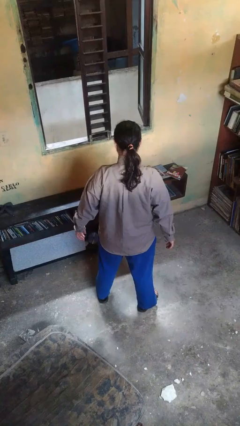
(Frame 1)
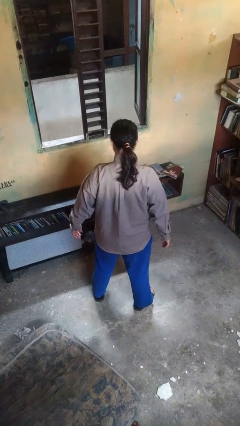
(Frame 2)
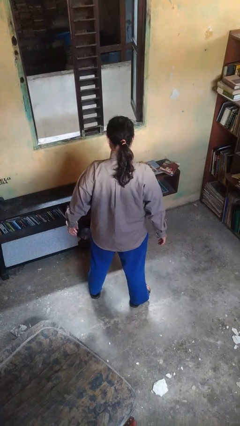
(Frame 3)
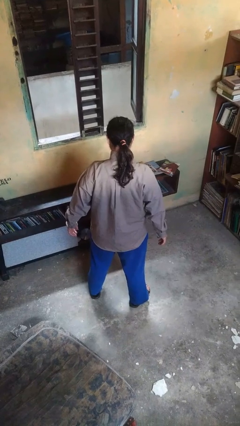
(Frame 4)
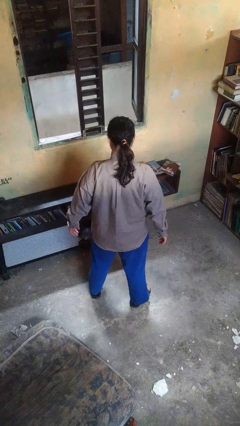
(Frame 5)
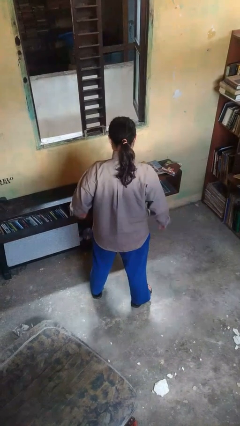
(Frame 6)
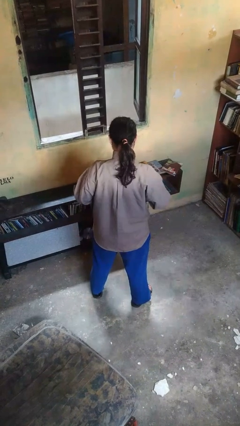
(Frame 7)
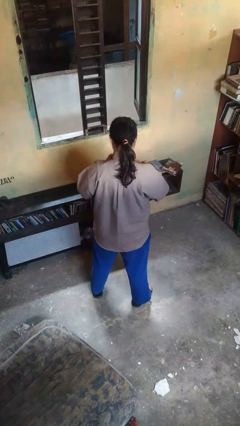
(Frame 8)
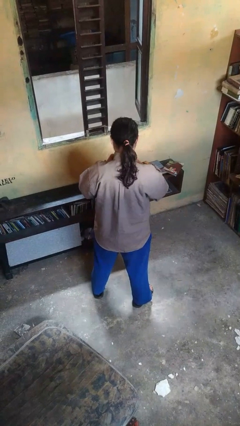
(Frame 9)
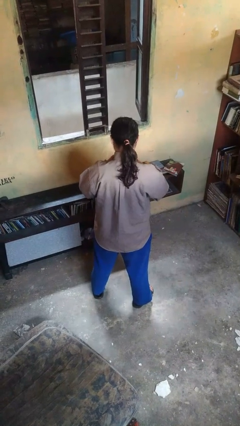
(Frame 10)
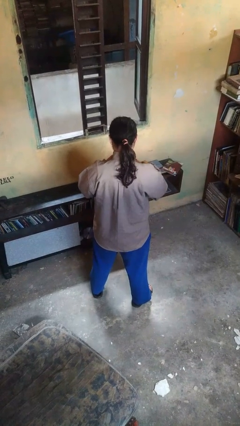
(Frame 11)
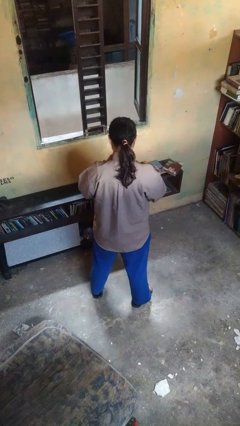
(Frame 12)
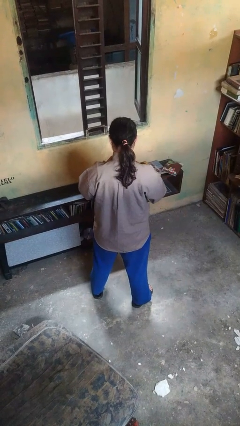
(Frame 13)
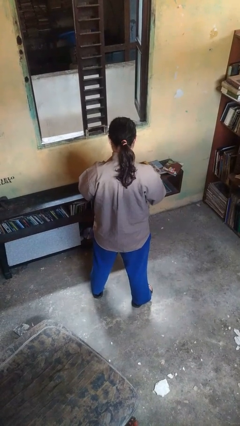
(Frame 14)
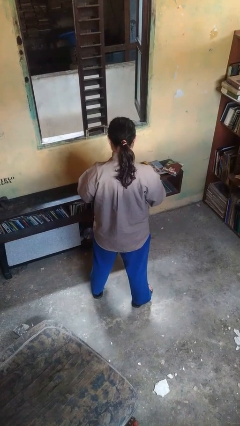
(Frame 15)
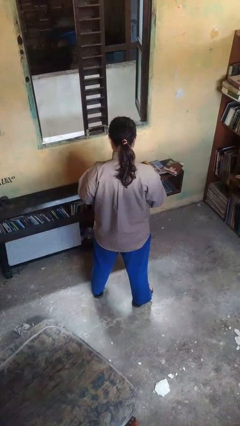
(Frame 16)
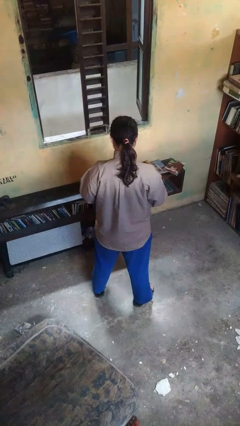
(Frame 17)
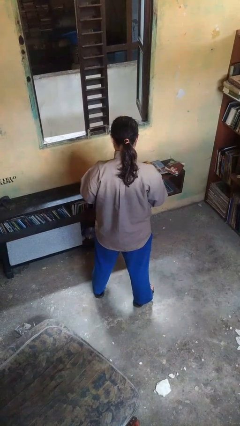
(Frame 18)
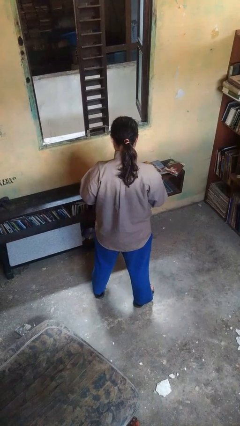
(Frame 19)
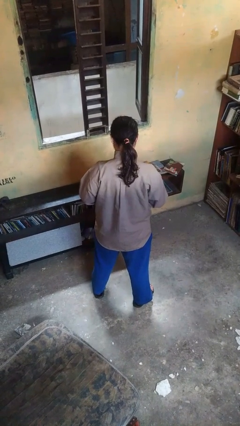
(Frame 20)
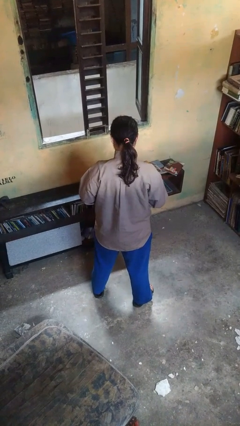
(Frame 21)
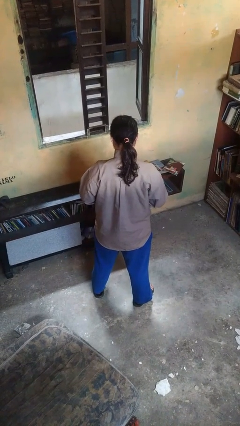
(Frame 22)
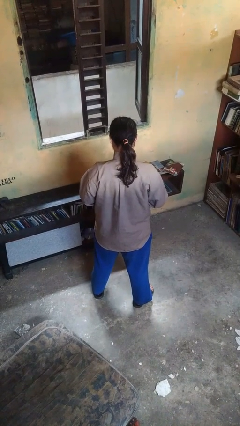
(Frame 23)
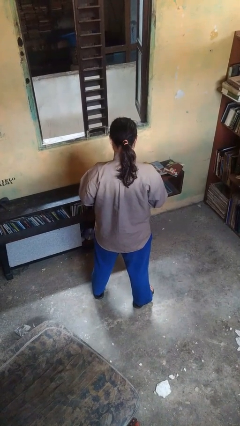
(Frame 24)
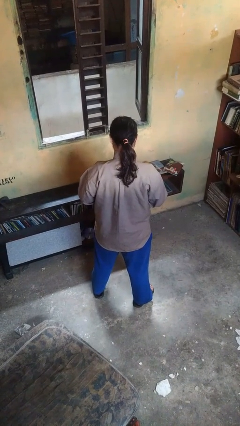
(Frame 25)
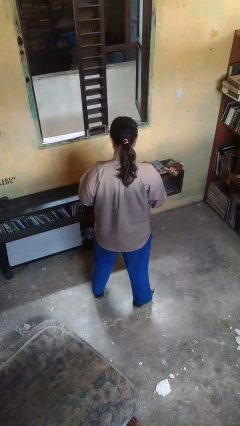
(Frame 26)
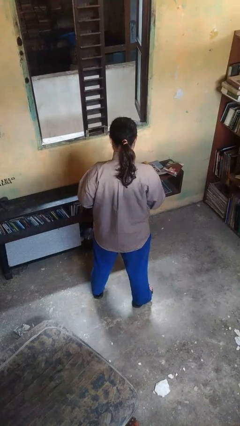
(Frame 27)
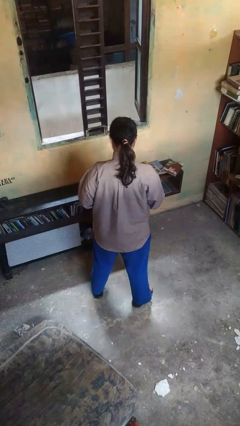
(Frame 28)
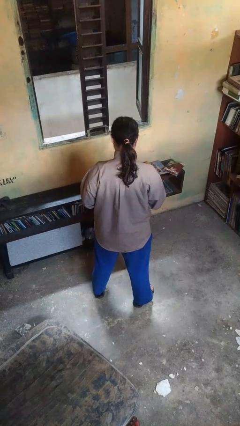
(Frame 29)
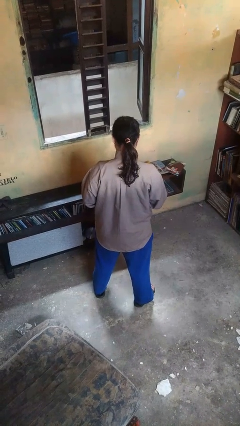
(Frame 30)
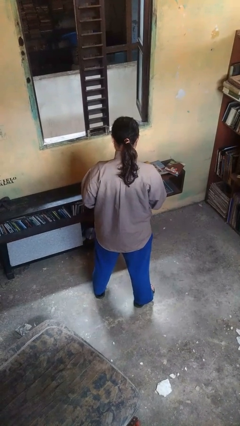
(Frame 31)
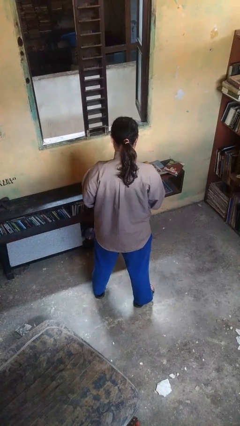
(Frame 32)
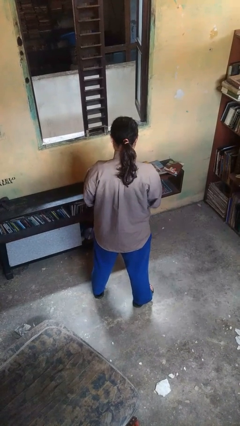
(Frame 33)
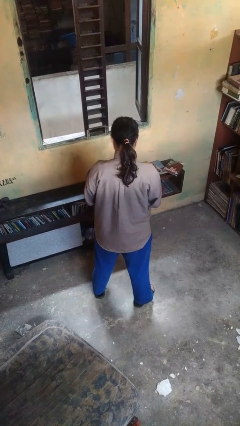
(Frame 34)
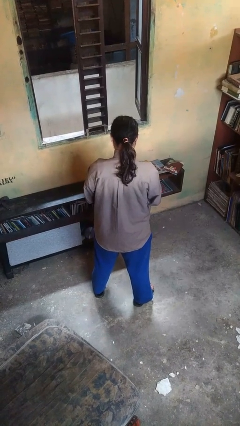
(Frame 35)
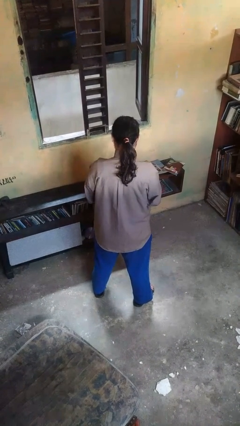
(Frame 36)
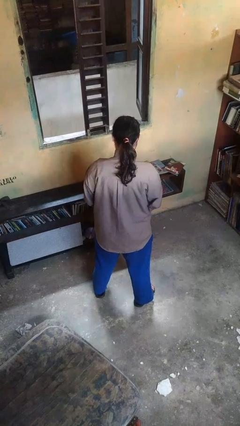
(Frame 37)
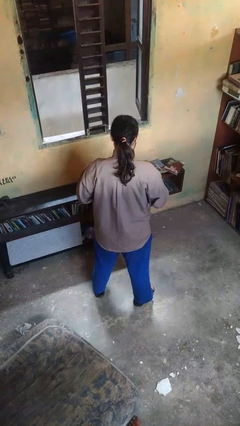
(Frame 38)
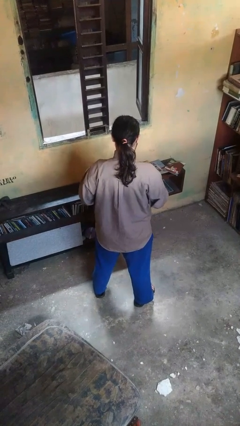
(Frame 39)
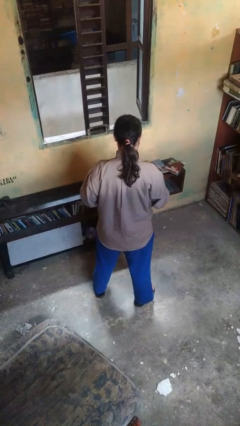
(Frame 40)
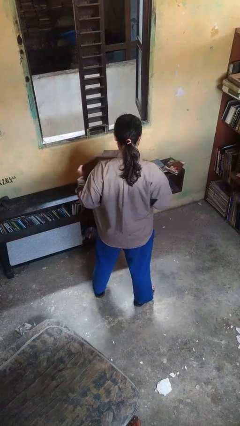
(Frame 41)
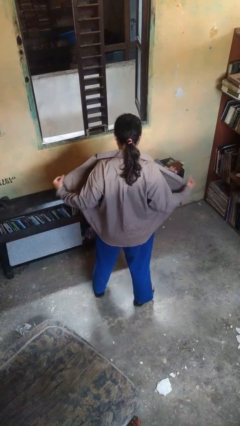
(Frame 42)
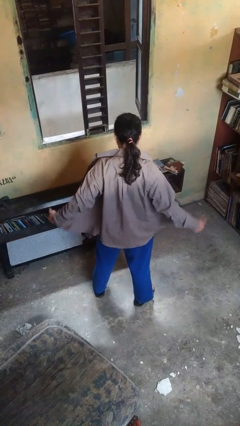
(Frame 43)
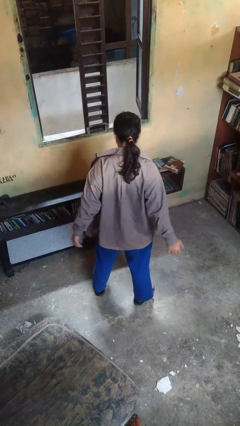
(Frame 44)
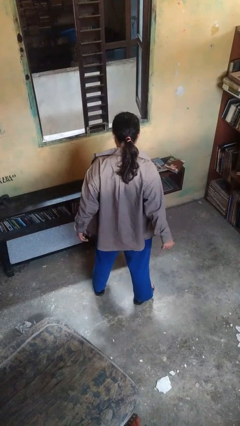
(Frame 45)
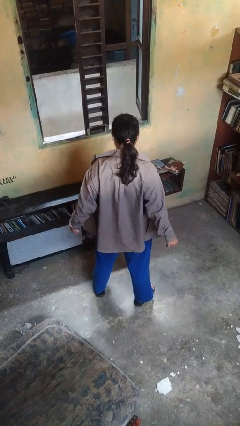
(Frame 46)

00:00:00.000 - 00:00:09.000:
person unbuttons shirt

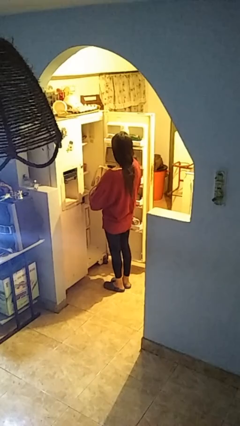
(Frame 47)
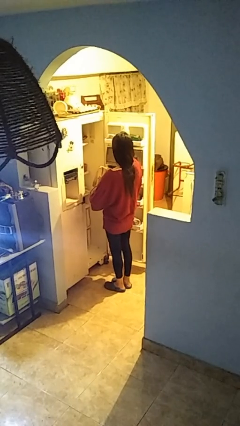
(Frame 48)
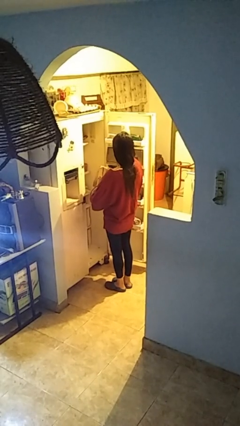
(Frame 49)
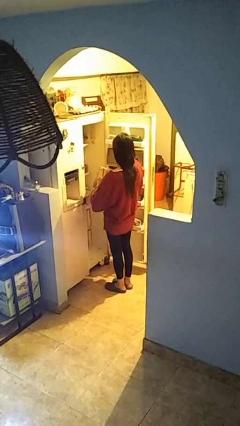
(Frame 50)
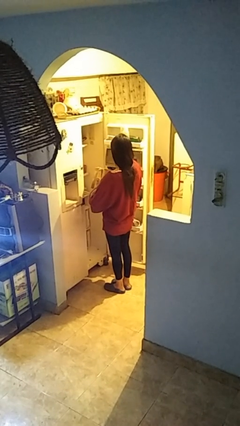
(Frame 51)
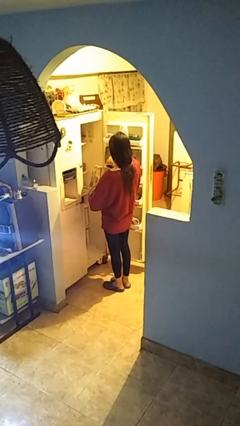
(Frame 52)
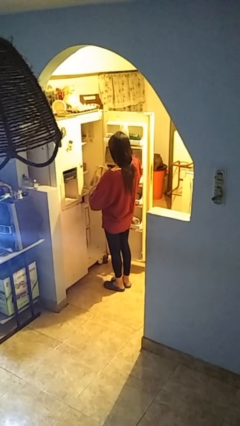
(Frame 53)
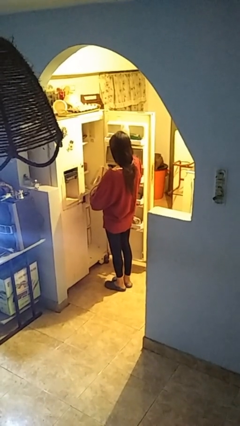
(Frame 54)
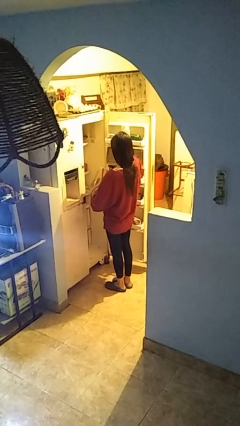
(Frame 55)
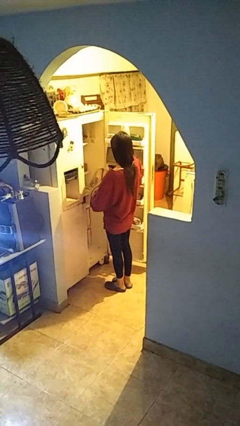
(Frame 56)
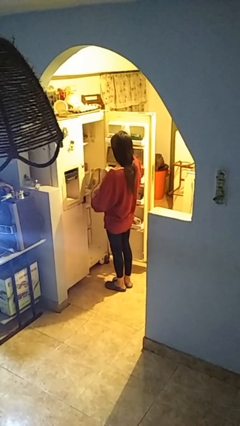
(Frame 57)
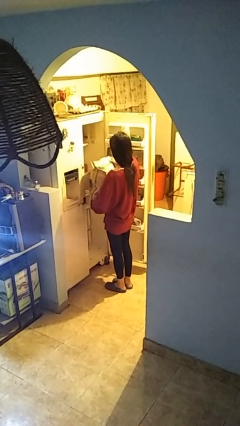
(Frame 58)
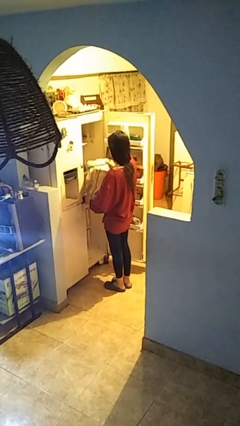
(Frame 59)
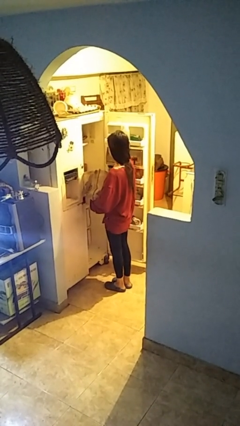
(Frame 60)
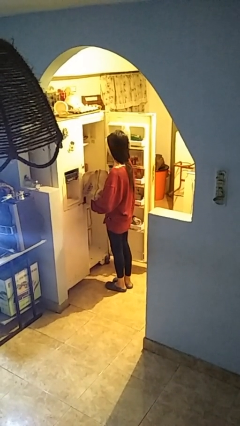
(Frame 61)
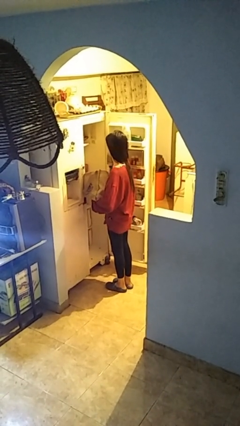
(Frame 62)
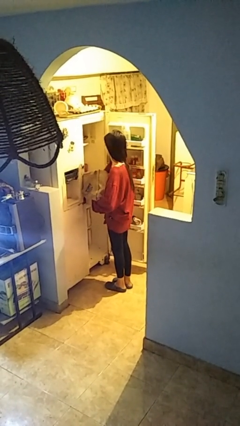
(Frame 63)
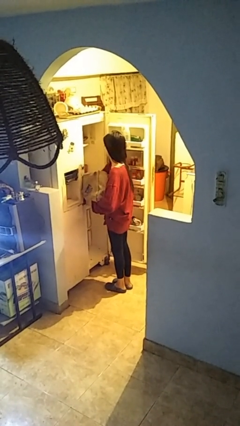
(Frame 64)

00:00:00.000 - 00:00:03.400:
person loads groceries into refrigerator

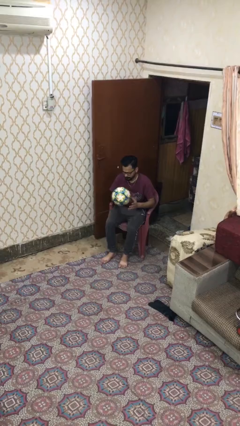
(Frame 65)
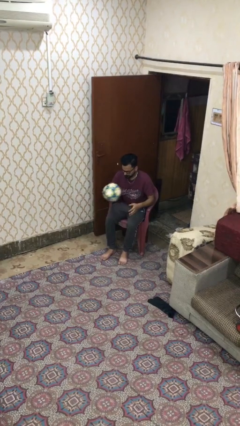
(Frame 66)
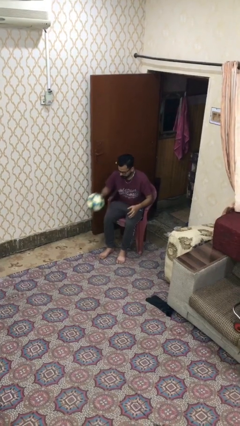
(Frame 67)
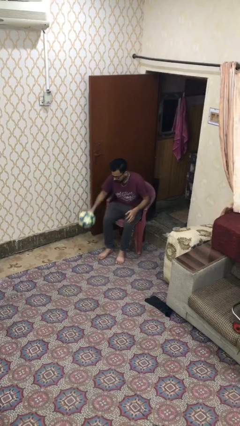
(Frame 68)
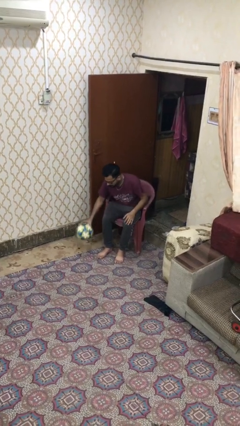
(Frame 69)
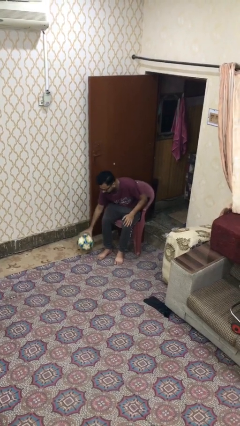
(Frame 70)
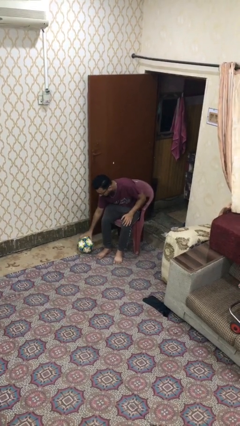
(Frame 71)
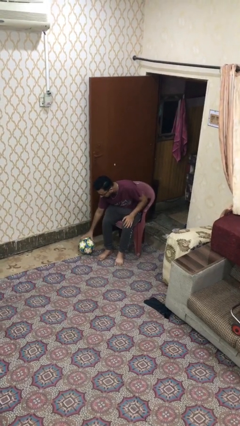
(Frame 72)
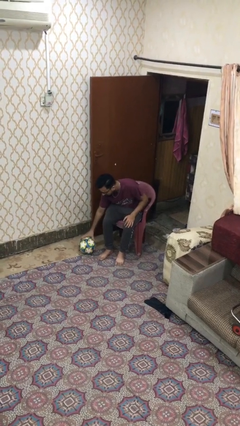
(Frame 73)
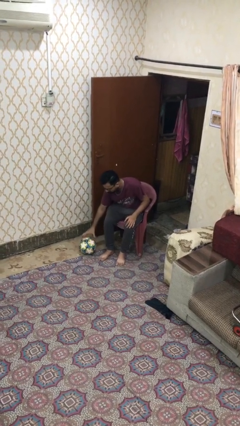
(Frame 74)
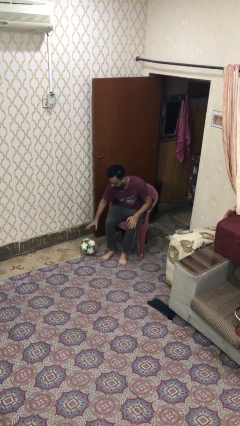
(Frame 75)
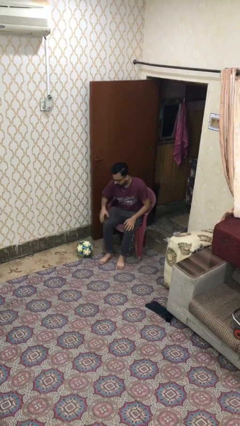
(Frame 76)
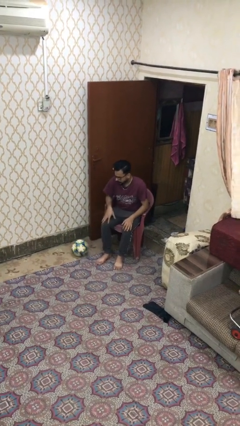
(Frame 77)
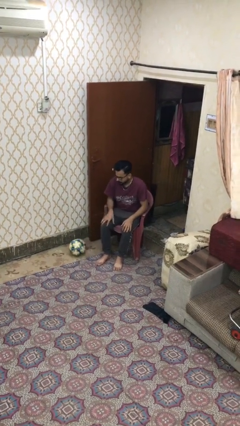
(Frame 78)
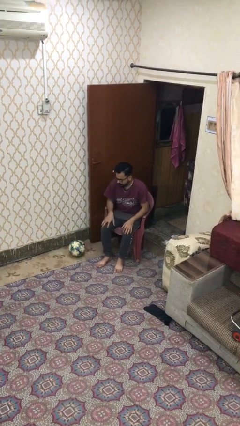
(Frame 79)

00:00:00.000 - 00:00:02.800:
person puts down object on floor

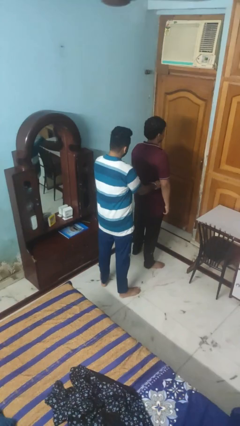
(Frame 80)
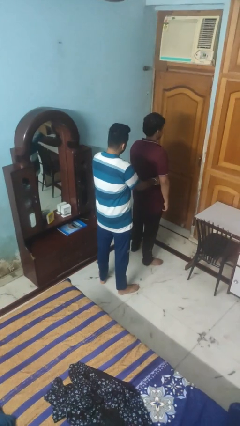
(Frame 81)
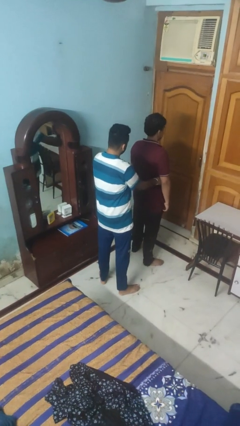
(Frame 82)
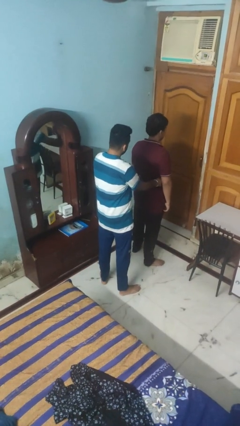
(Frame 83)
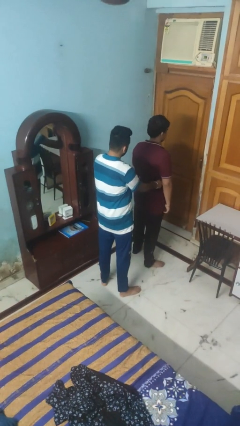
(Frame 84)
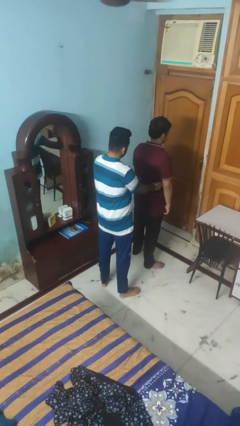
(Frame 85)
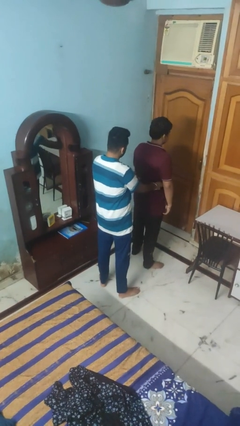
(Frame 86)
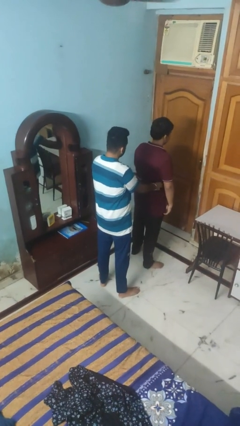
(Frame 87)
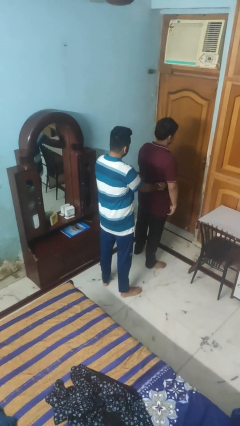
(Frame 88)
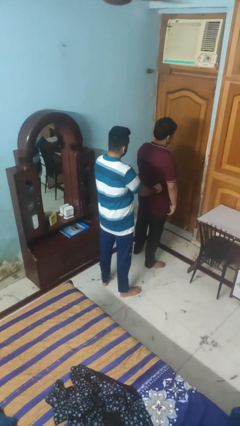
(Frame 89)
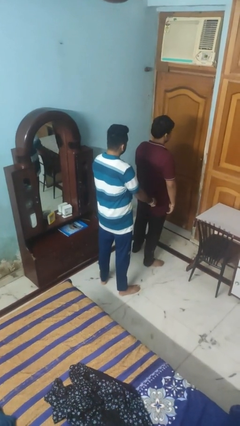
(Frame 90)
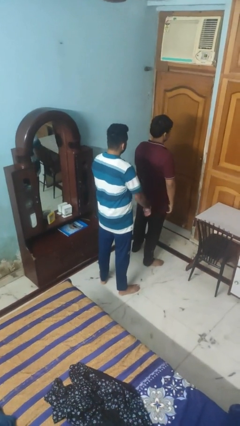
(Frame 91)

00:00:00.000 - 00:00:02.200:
person tickles person

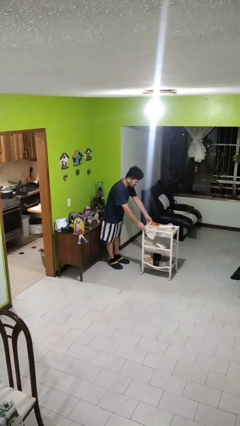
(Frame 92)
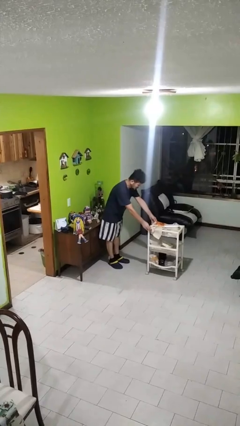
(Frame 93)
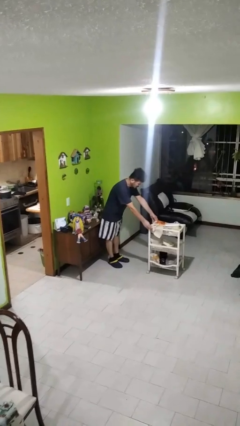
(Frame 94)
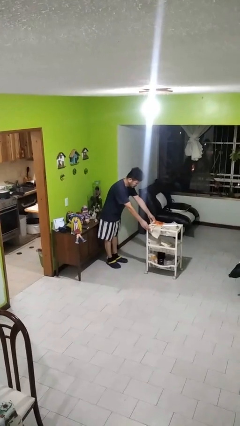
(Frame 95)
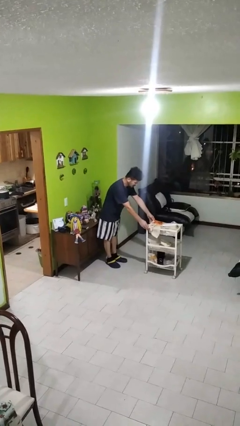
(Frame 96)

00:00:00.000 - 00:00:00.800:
person pushes wheeled cart
